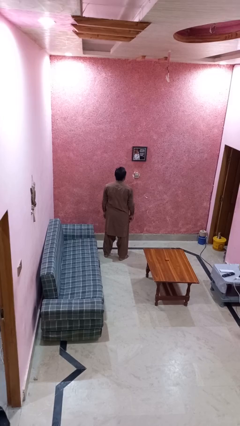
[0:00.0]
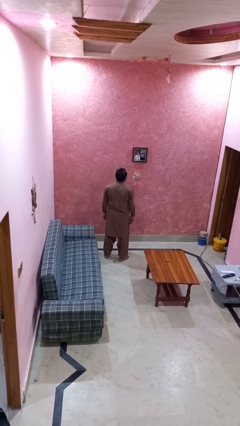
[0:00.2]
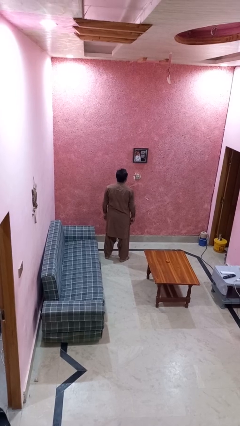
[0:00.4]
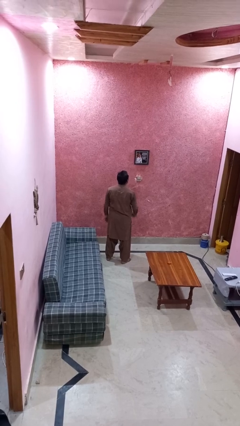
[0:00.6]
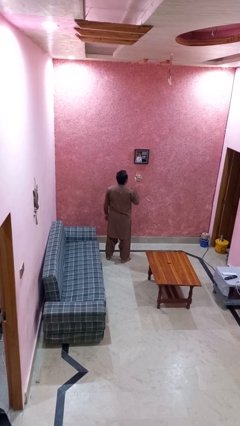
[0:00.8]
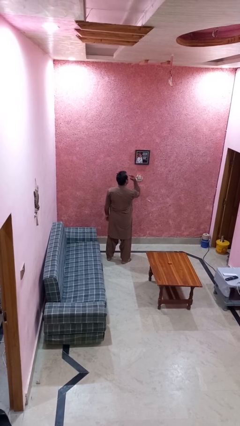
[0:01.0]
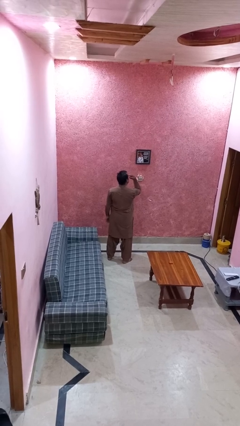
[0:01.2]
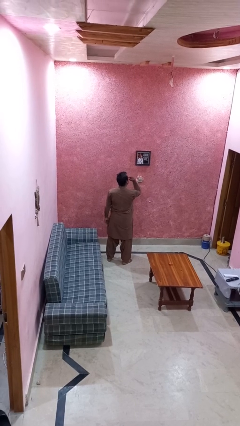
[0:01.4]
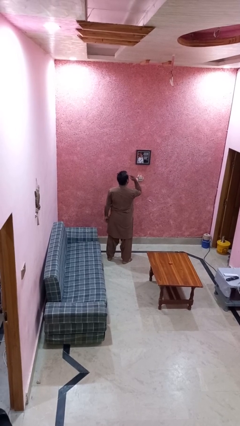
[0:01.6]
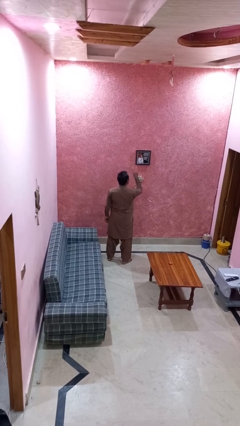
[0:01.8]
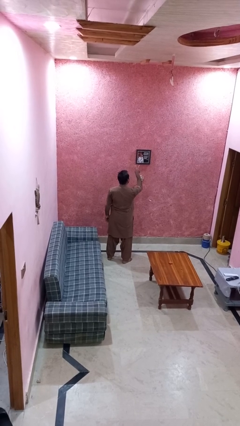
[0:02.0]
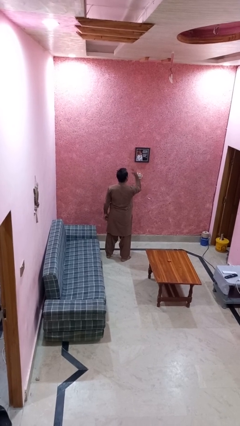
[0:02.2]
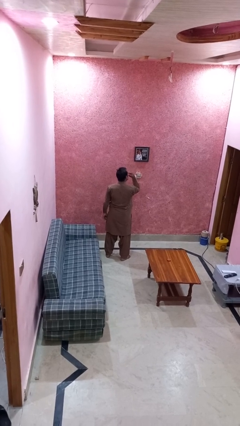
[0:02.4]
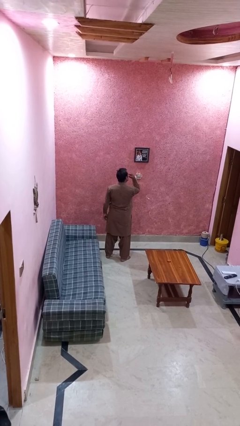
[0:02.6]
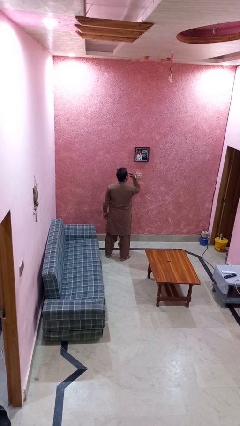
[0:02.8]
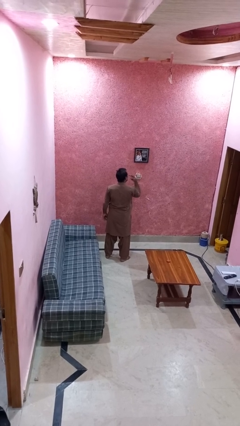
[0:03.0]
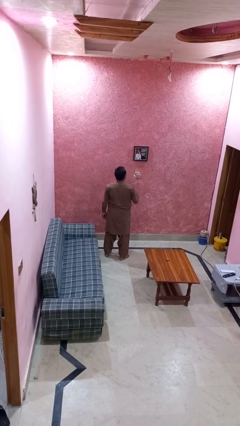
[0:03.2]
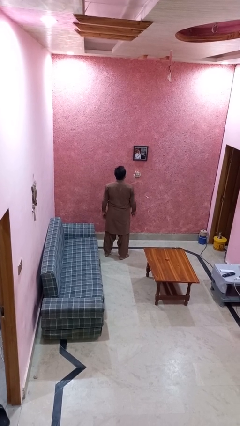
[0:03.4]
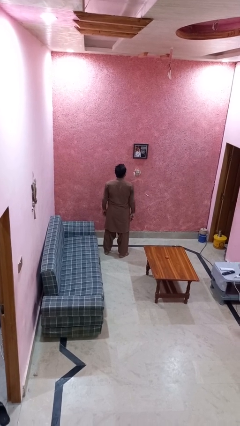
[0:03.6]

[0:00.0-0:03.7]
person gestures watch closely

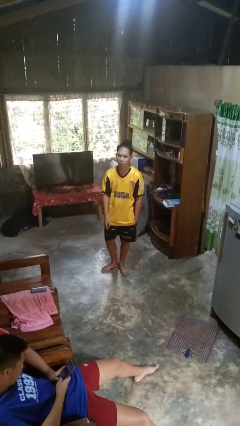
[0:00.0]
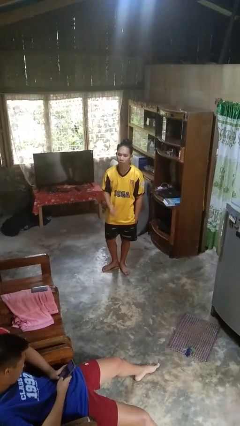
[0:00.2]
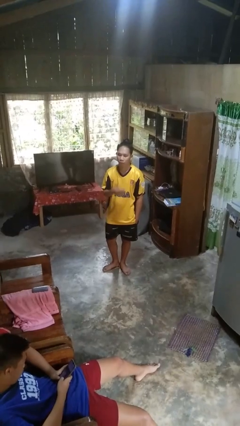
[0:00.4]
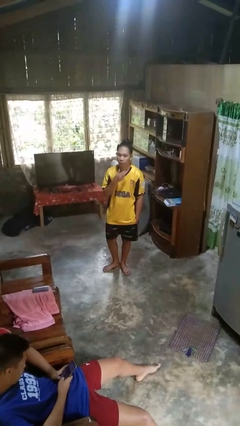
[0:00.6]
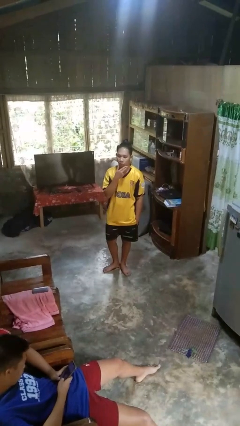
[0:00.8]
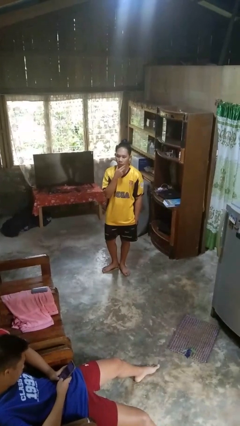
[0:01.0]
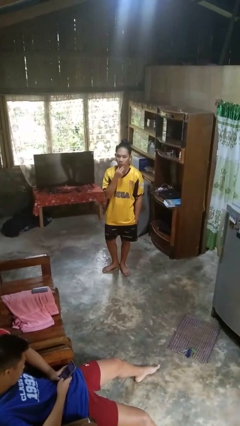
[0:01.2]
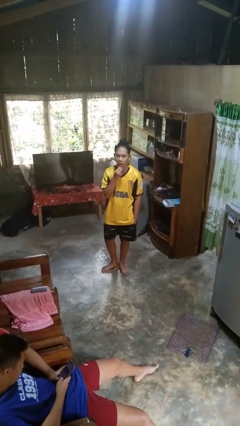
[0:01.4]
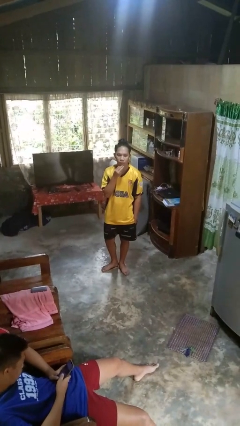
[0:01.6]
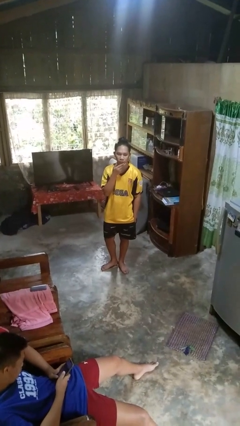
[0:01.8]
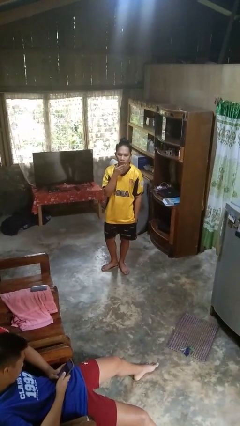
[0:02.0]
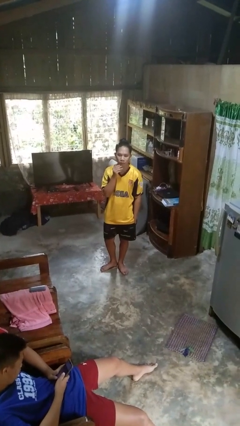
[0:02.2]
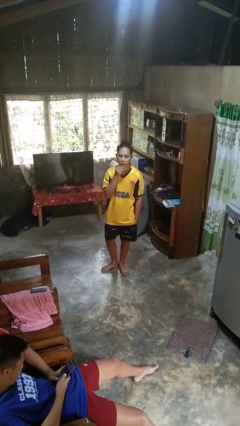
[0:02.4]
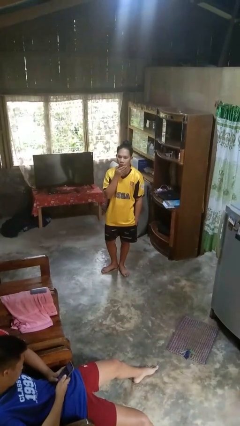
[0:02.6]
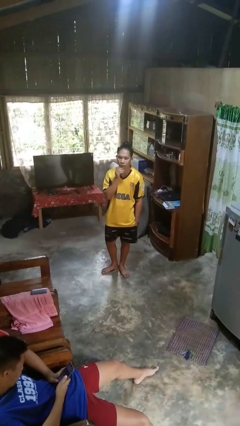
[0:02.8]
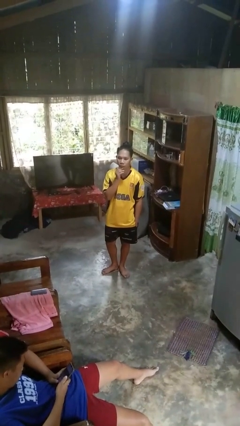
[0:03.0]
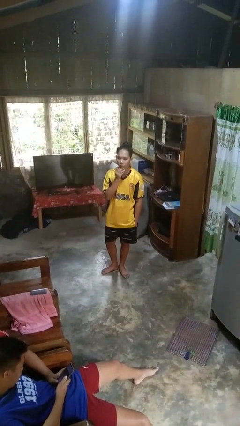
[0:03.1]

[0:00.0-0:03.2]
person strokes chin

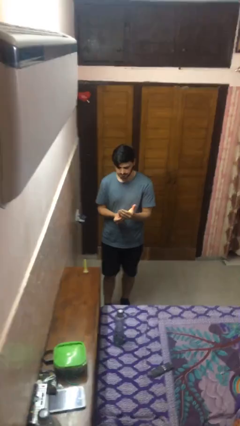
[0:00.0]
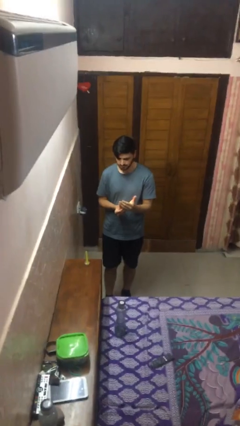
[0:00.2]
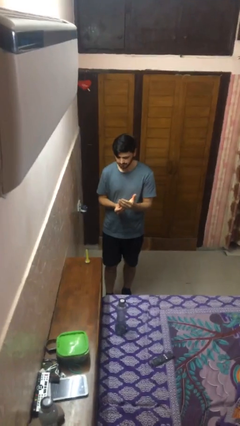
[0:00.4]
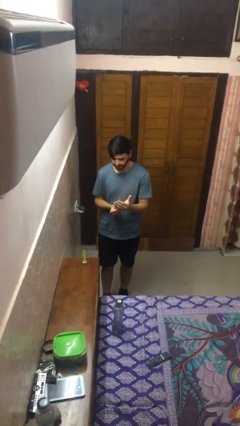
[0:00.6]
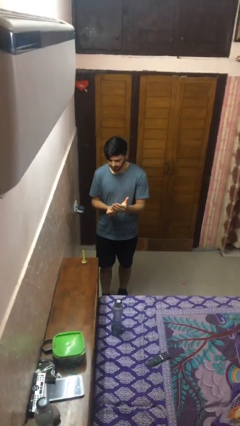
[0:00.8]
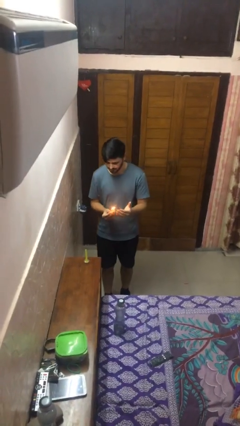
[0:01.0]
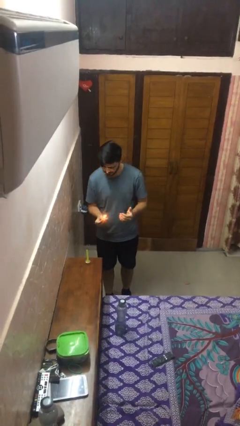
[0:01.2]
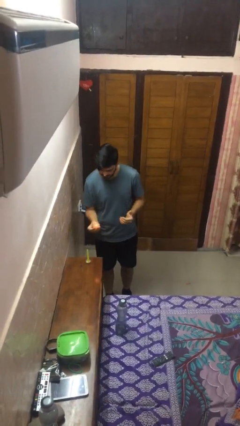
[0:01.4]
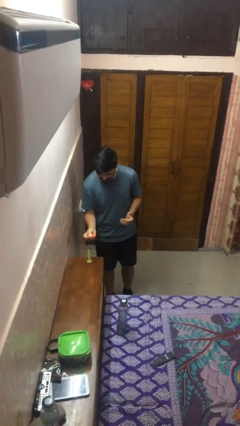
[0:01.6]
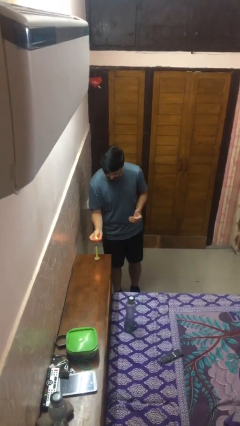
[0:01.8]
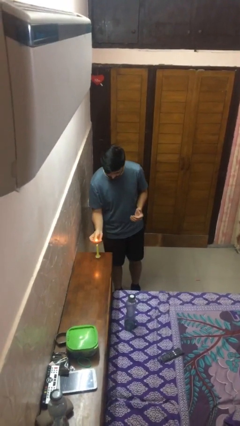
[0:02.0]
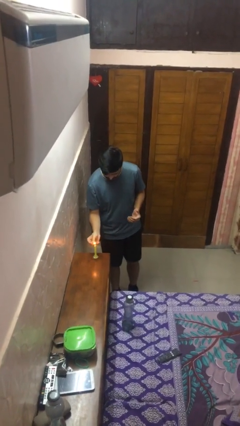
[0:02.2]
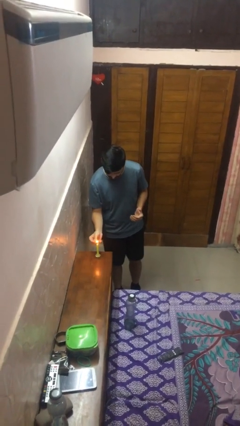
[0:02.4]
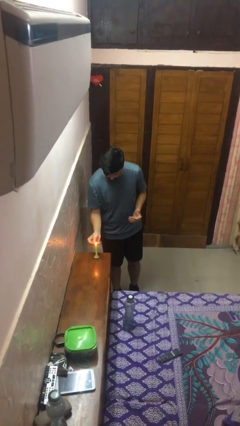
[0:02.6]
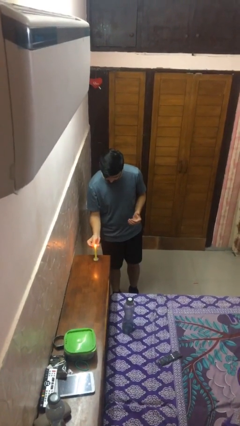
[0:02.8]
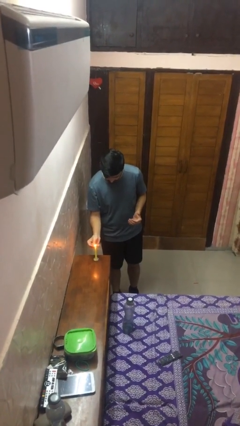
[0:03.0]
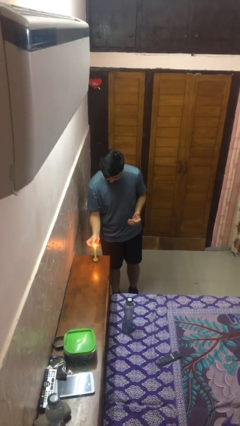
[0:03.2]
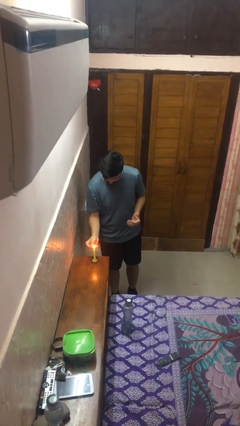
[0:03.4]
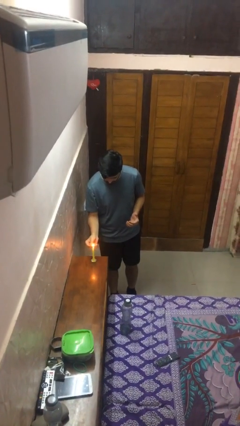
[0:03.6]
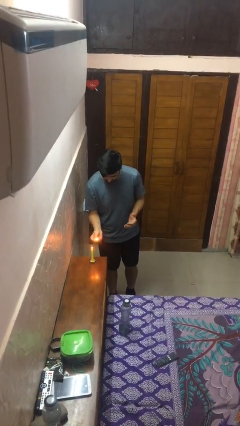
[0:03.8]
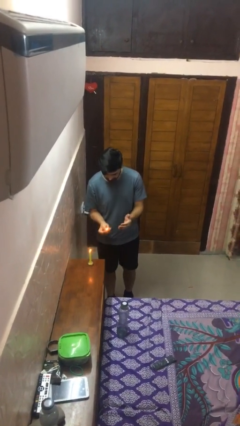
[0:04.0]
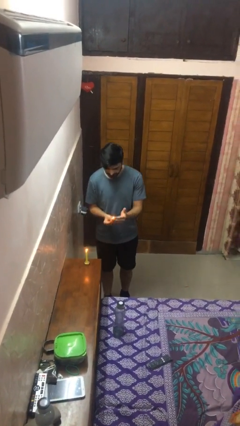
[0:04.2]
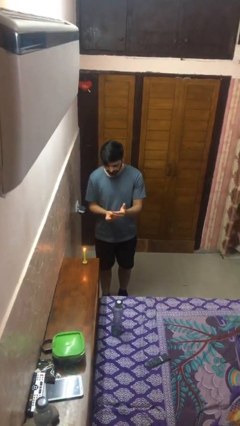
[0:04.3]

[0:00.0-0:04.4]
person lights candle

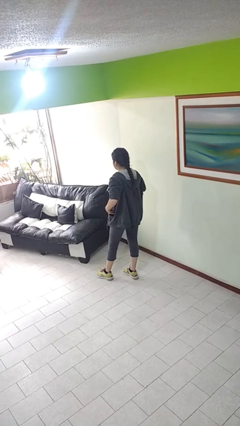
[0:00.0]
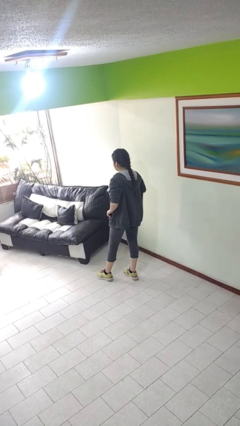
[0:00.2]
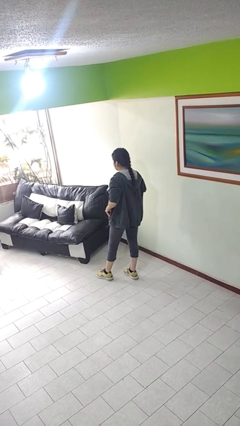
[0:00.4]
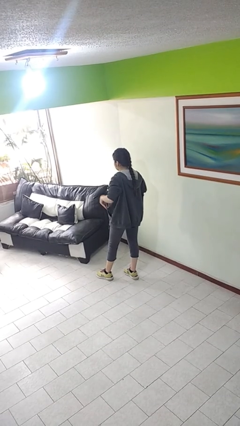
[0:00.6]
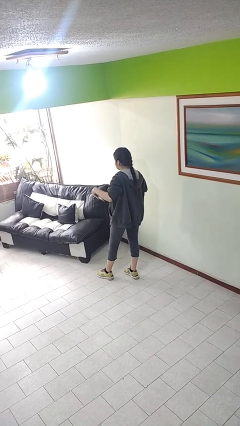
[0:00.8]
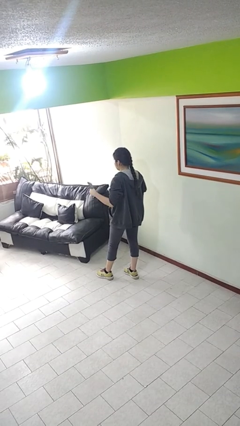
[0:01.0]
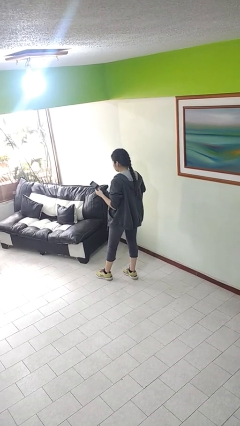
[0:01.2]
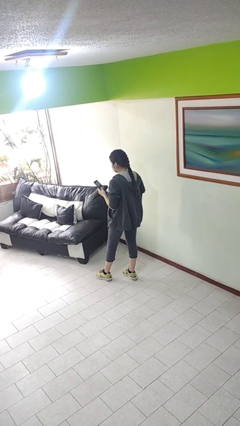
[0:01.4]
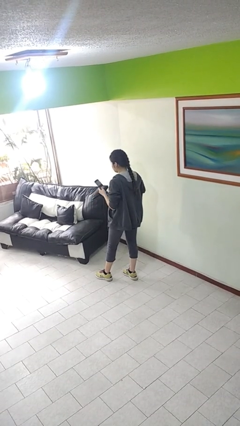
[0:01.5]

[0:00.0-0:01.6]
person takes phone from pocket

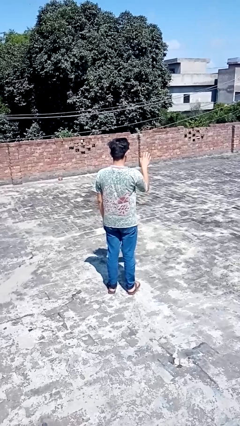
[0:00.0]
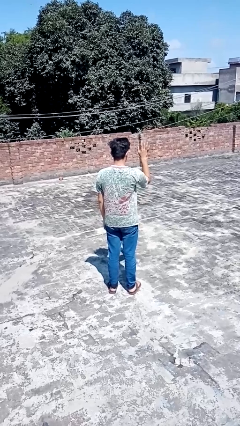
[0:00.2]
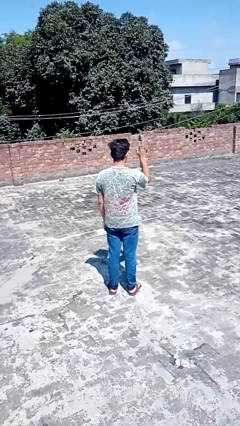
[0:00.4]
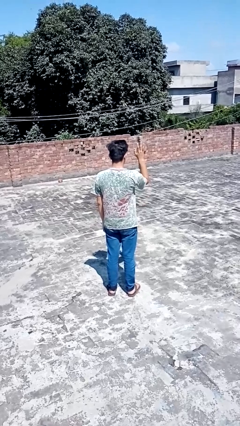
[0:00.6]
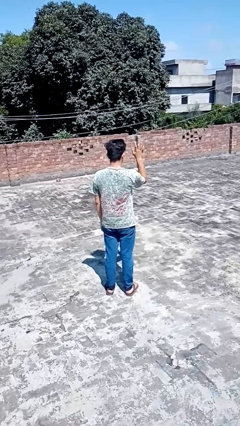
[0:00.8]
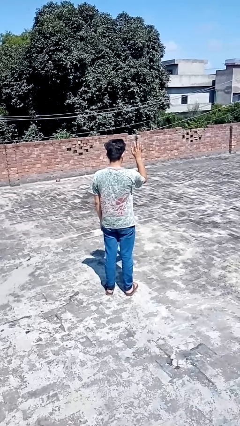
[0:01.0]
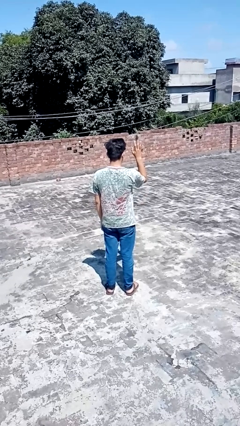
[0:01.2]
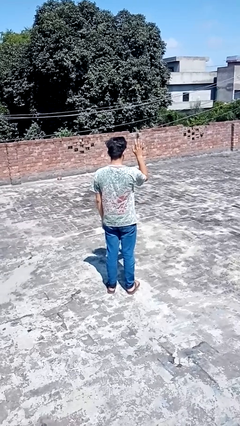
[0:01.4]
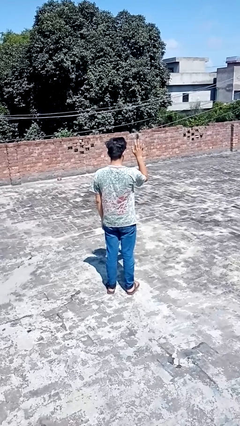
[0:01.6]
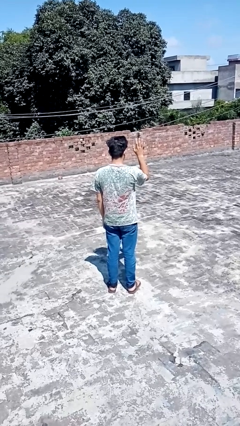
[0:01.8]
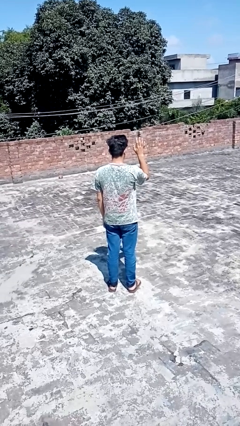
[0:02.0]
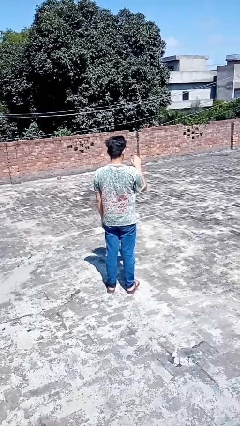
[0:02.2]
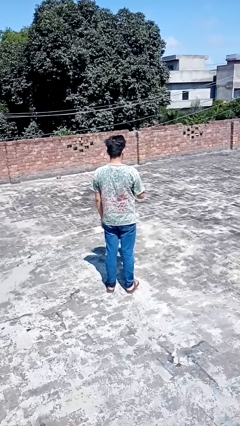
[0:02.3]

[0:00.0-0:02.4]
person gestures number five

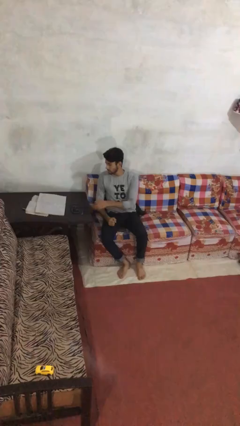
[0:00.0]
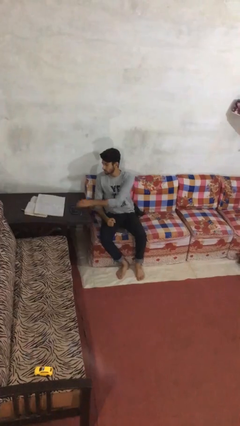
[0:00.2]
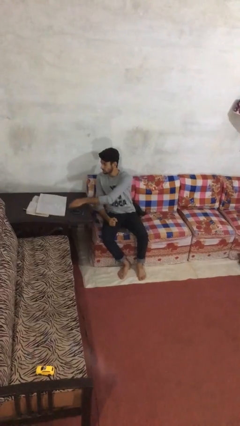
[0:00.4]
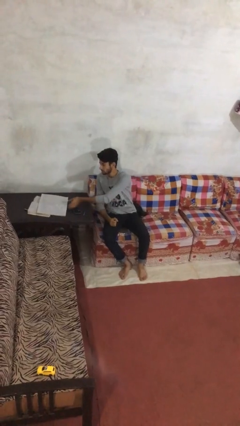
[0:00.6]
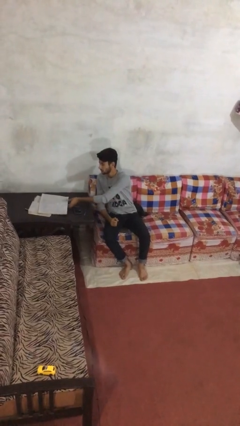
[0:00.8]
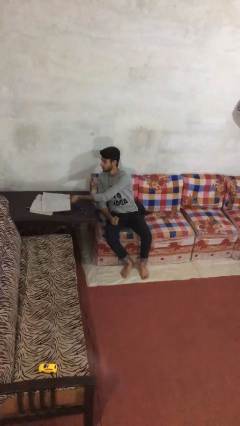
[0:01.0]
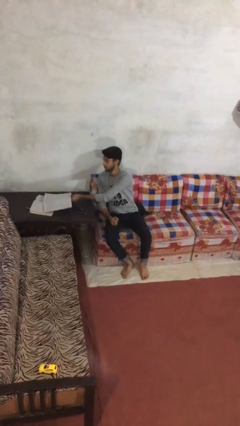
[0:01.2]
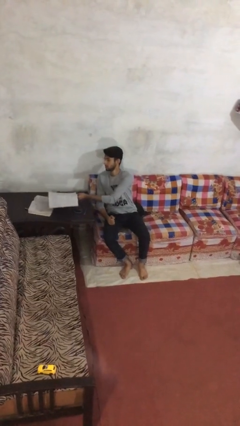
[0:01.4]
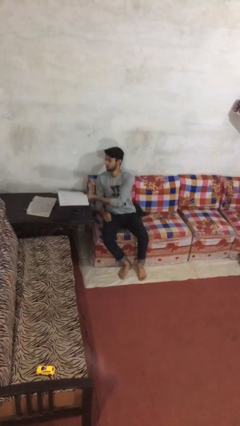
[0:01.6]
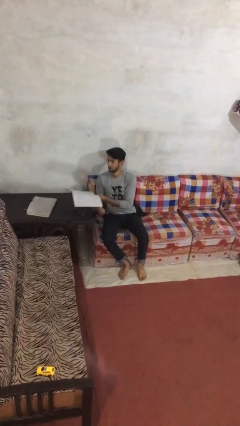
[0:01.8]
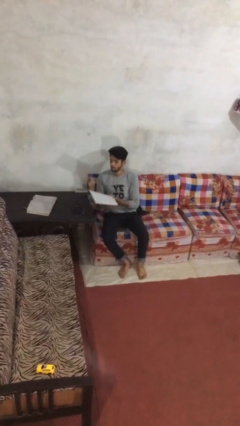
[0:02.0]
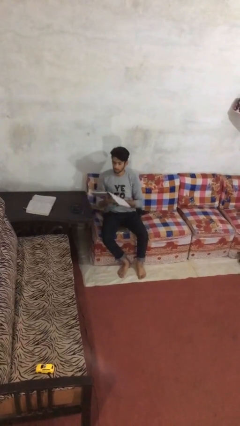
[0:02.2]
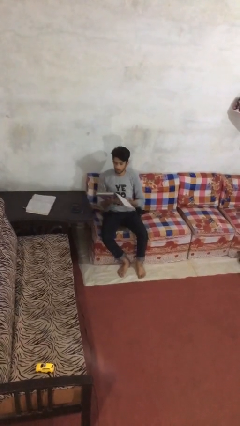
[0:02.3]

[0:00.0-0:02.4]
person picks up object from table

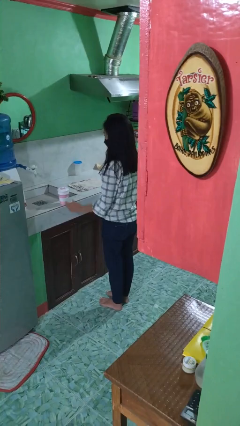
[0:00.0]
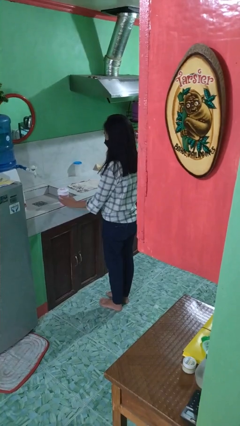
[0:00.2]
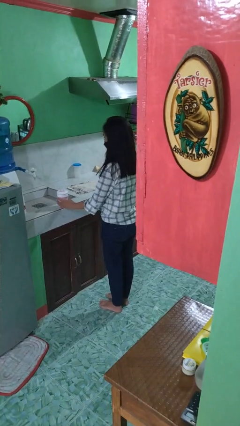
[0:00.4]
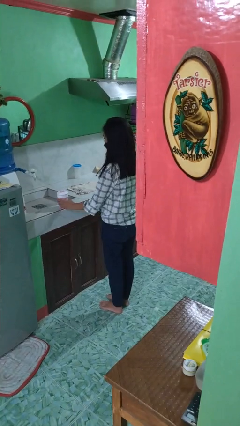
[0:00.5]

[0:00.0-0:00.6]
person picks up object from countertop
